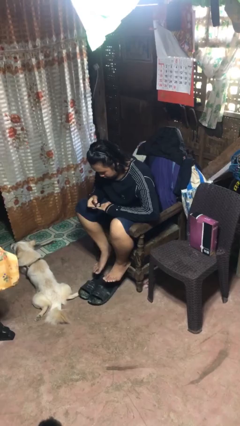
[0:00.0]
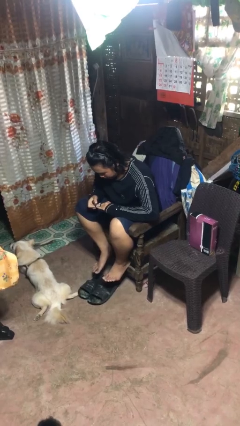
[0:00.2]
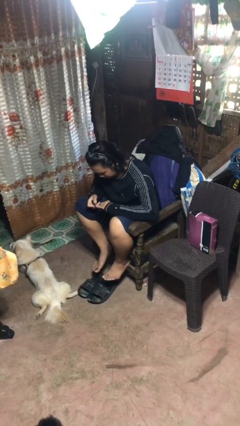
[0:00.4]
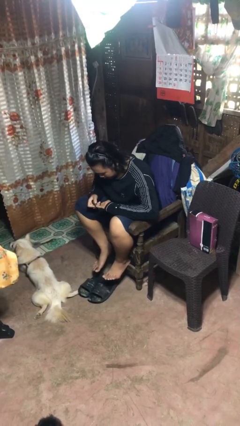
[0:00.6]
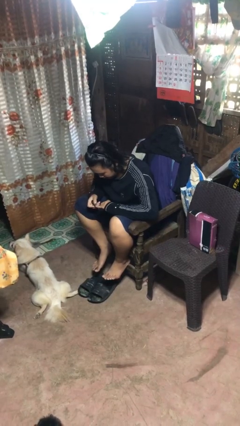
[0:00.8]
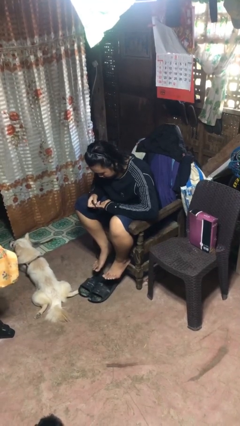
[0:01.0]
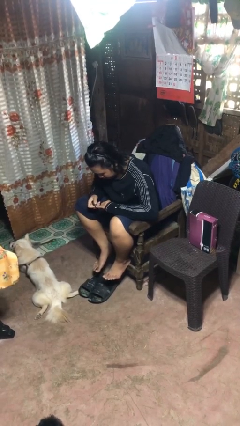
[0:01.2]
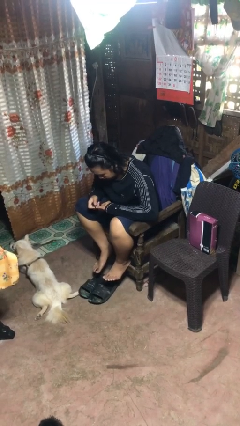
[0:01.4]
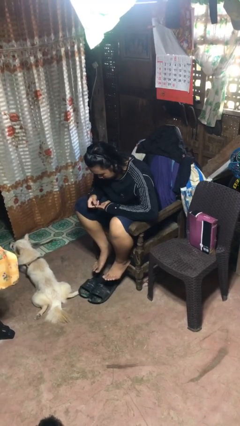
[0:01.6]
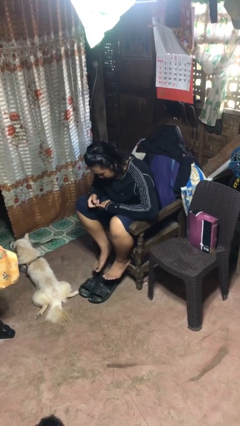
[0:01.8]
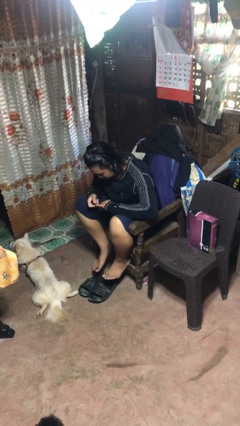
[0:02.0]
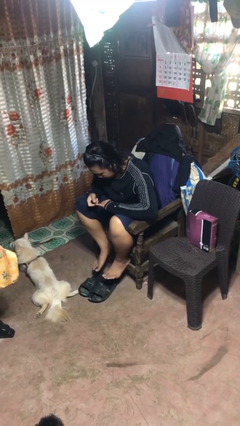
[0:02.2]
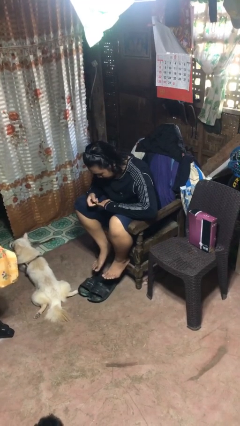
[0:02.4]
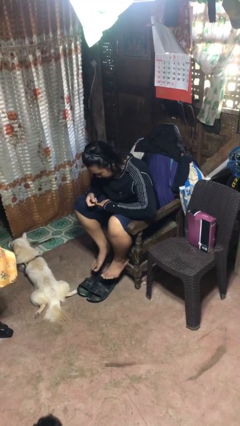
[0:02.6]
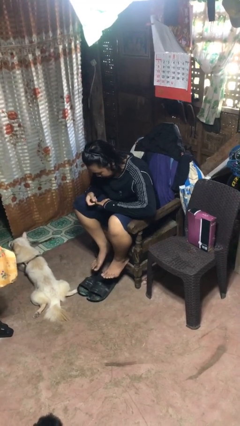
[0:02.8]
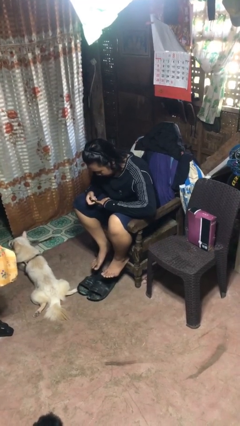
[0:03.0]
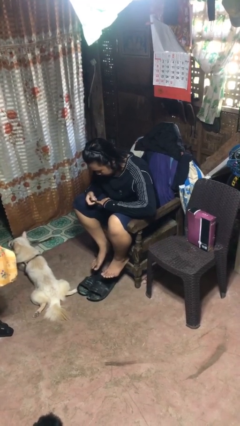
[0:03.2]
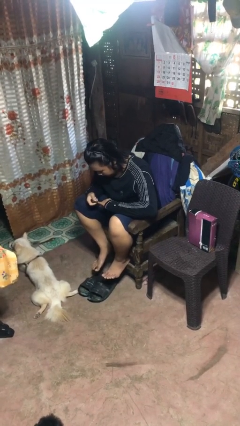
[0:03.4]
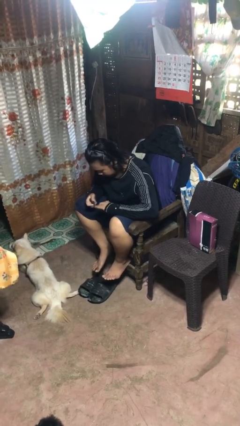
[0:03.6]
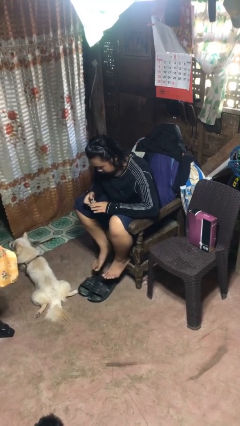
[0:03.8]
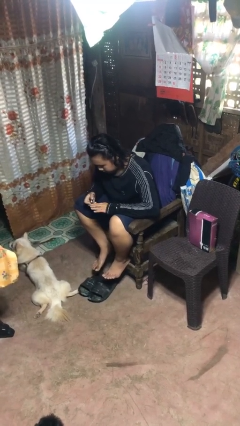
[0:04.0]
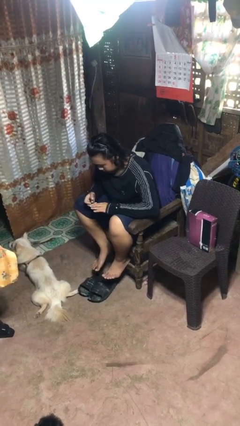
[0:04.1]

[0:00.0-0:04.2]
person clips fingernails

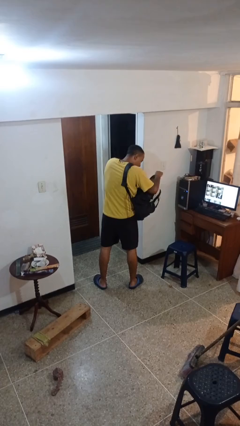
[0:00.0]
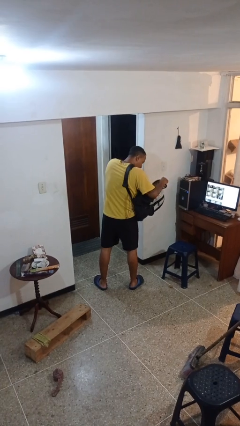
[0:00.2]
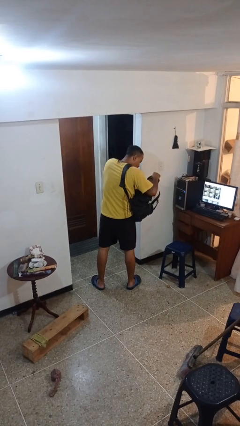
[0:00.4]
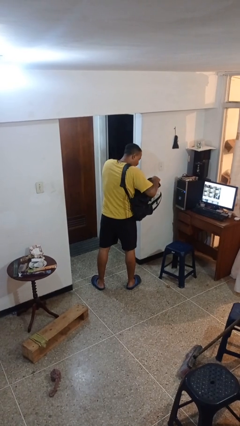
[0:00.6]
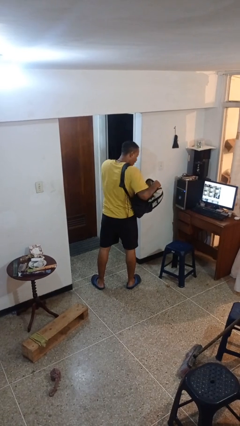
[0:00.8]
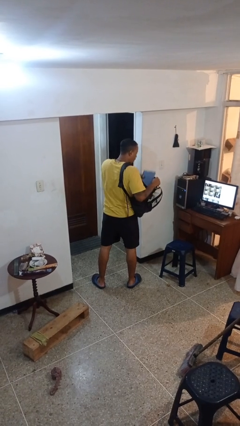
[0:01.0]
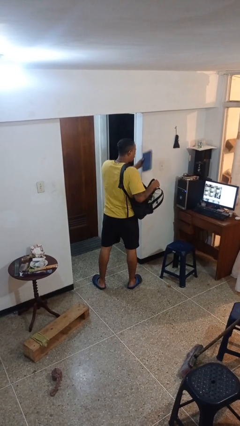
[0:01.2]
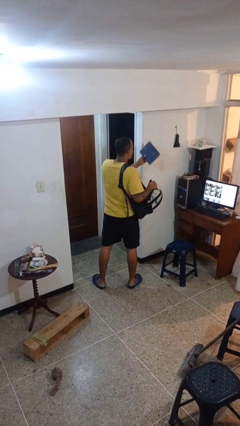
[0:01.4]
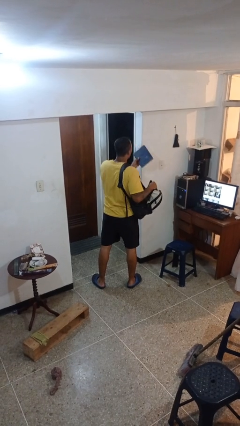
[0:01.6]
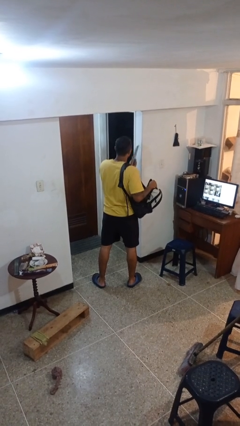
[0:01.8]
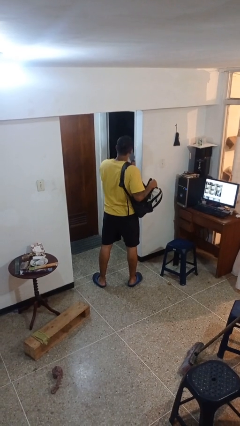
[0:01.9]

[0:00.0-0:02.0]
person takes object from backpack

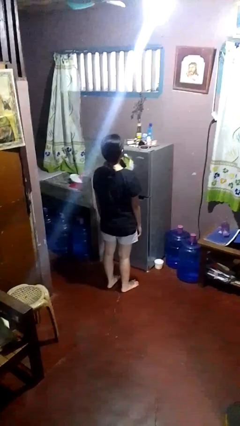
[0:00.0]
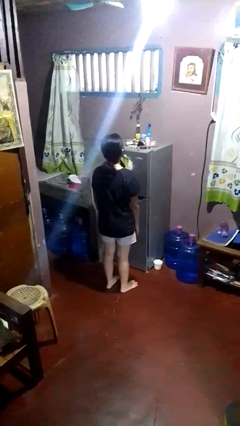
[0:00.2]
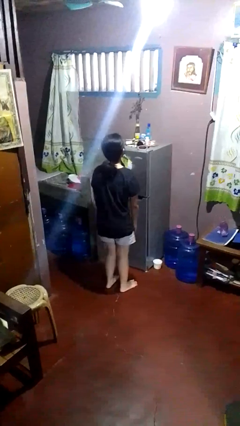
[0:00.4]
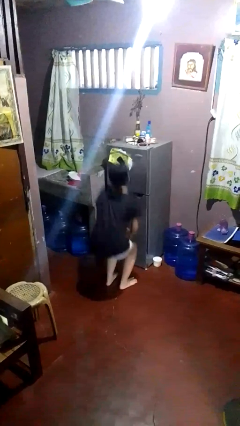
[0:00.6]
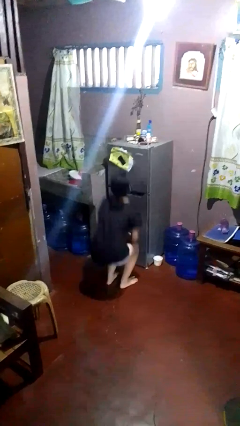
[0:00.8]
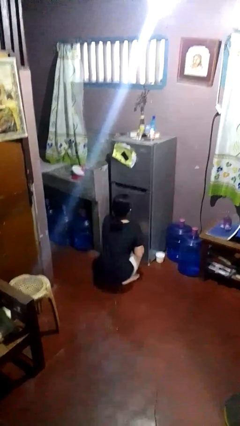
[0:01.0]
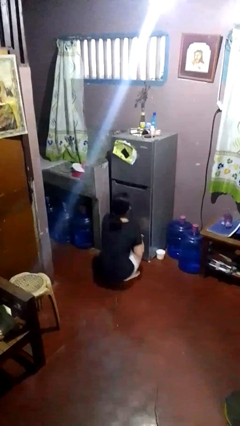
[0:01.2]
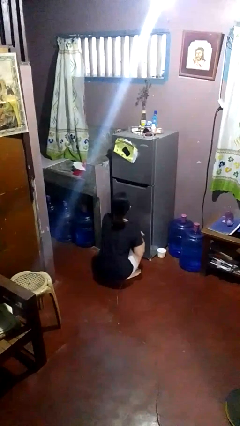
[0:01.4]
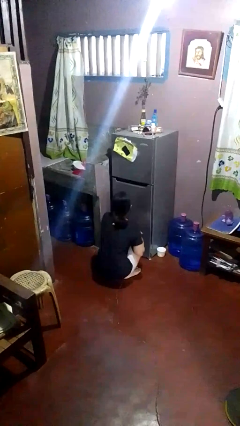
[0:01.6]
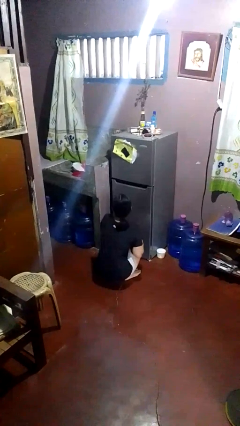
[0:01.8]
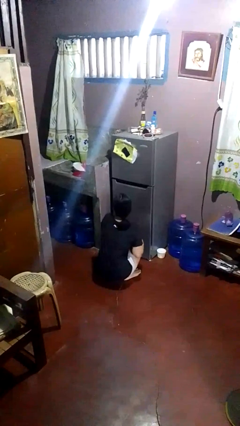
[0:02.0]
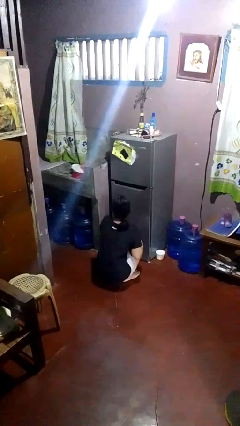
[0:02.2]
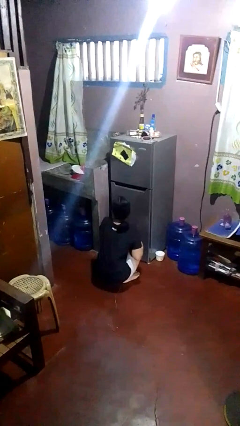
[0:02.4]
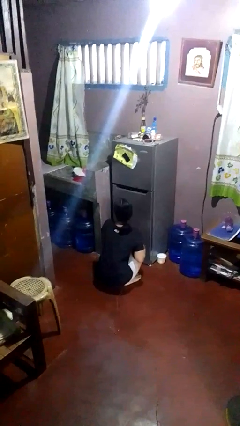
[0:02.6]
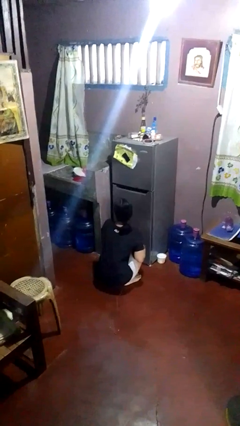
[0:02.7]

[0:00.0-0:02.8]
person squats

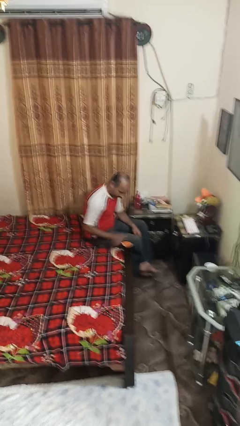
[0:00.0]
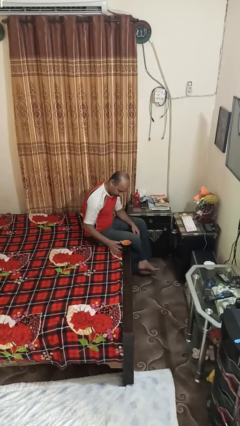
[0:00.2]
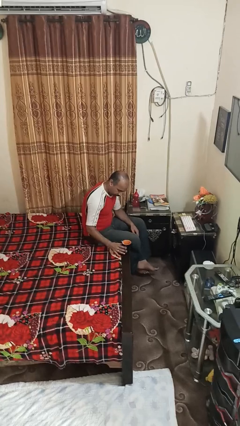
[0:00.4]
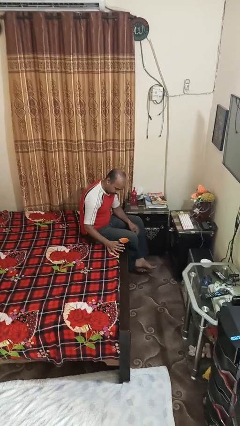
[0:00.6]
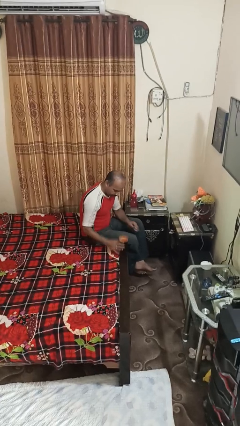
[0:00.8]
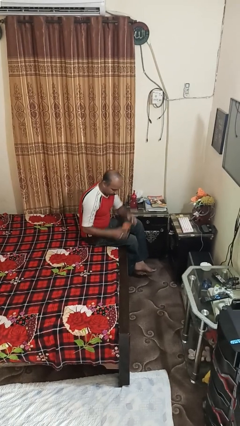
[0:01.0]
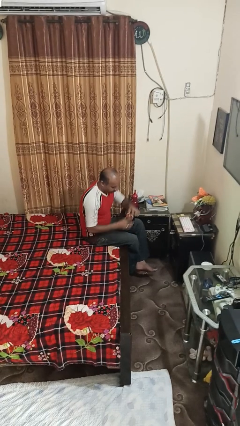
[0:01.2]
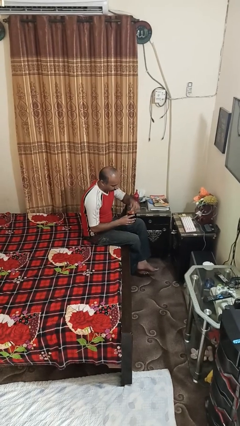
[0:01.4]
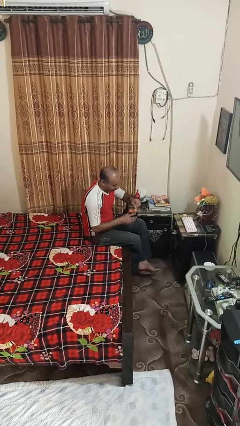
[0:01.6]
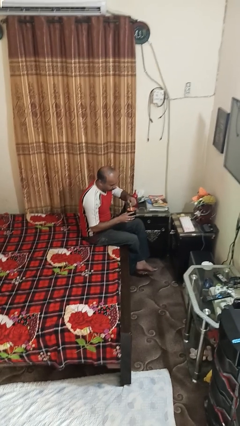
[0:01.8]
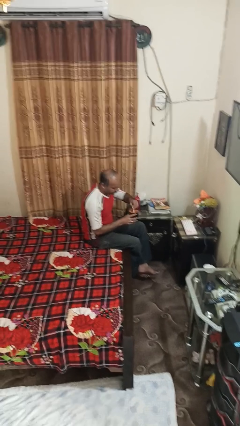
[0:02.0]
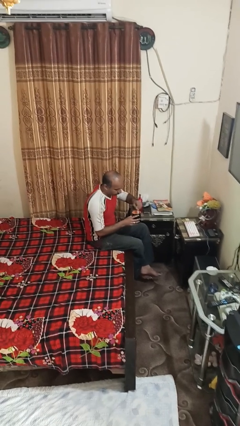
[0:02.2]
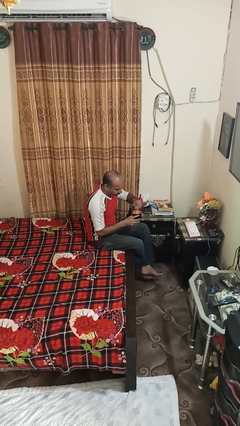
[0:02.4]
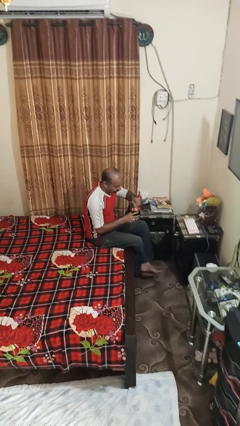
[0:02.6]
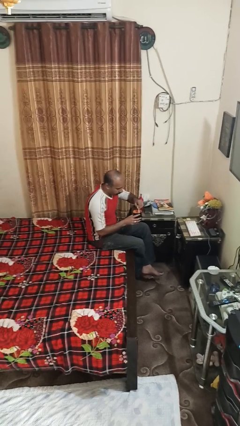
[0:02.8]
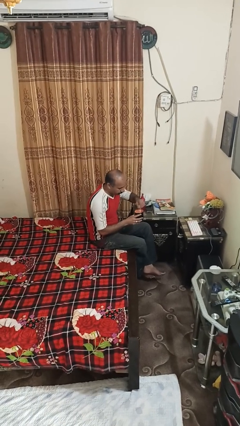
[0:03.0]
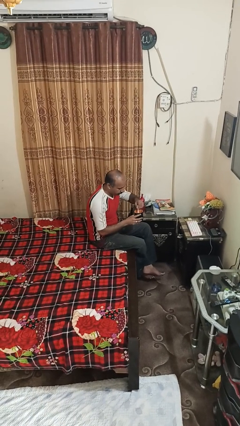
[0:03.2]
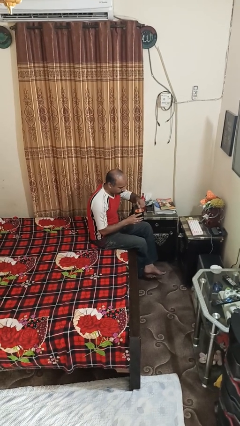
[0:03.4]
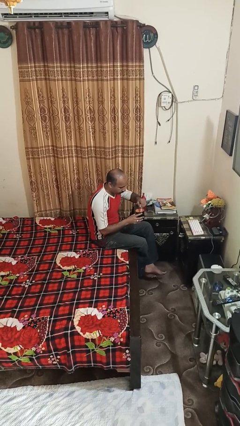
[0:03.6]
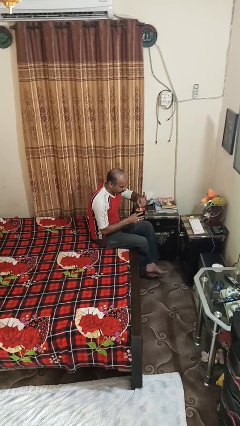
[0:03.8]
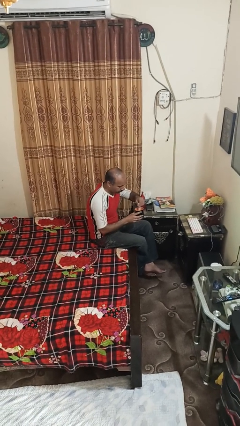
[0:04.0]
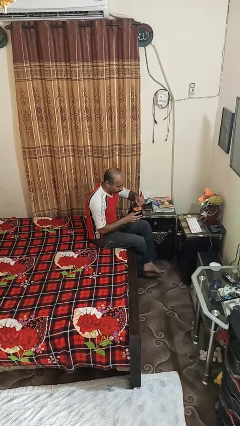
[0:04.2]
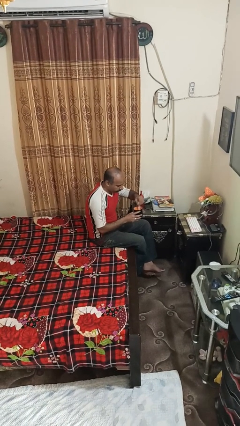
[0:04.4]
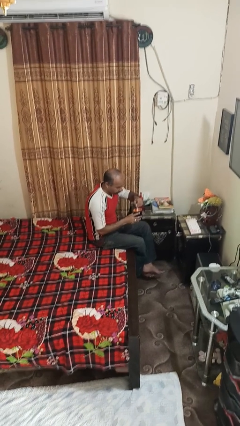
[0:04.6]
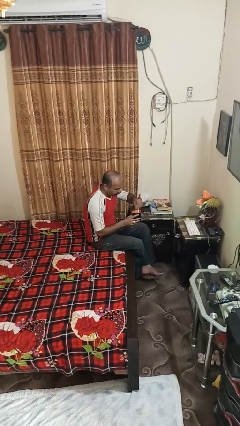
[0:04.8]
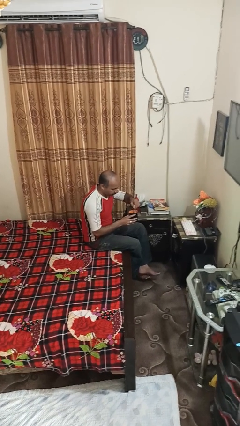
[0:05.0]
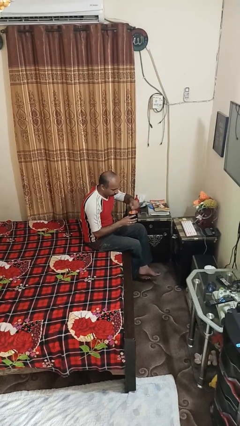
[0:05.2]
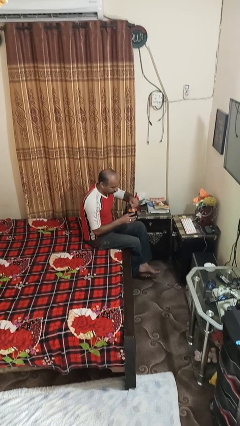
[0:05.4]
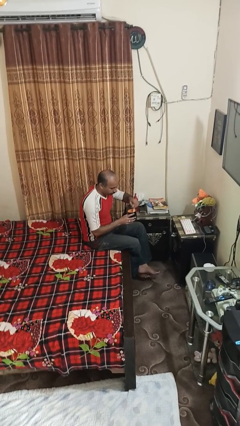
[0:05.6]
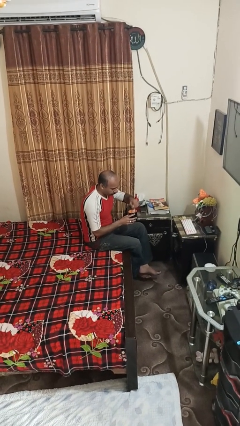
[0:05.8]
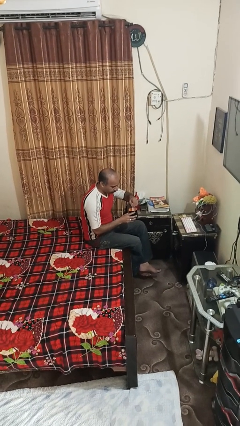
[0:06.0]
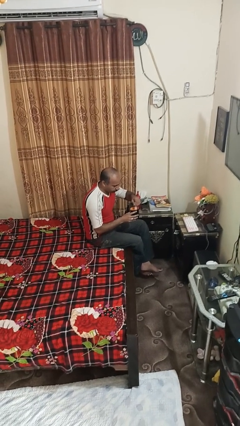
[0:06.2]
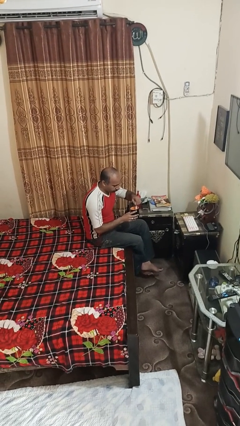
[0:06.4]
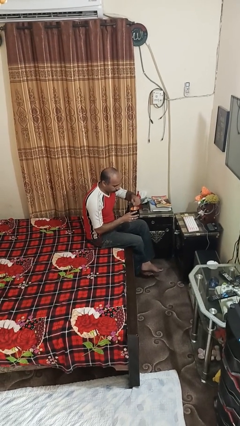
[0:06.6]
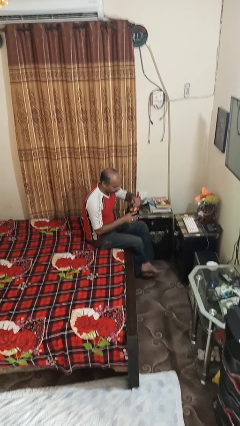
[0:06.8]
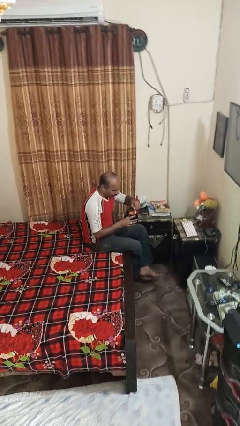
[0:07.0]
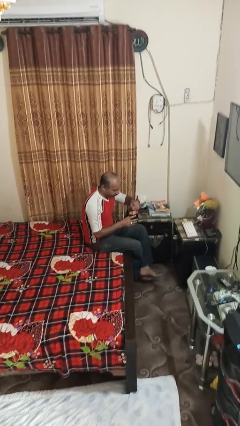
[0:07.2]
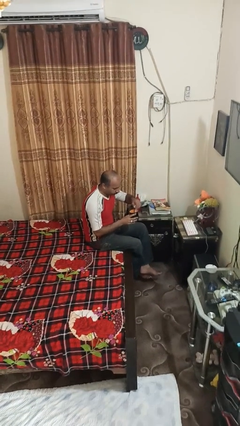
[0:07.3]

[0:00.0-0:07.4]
person stirs mug

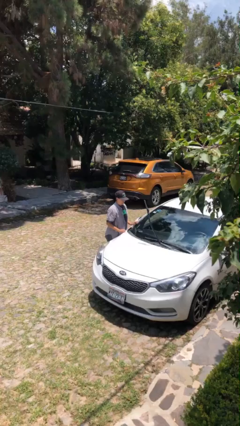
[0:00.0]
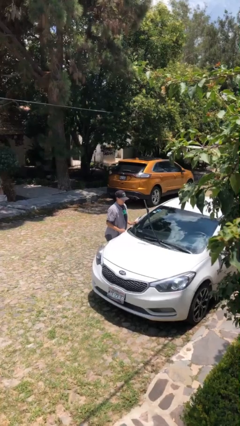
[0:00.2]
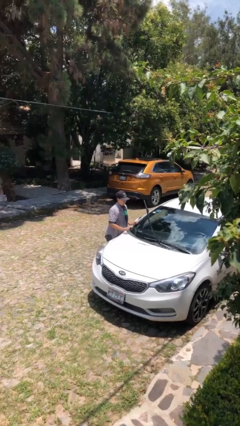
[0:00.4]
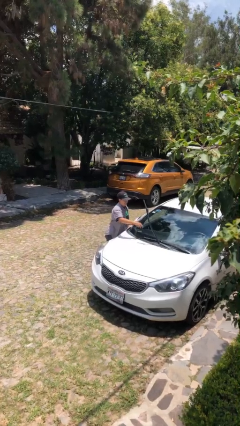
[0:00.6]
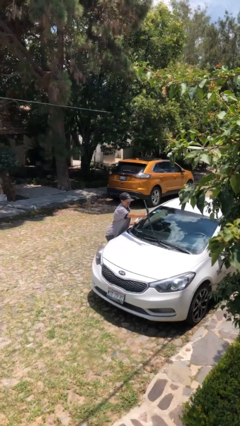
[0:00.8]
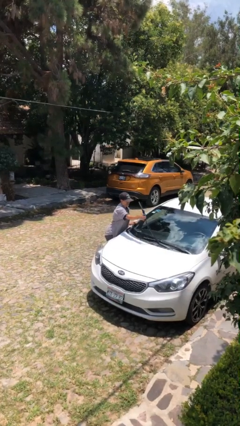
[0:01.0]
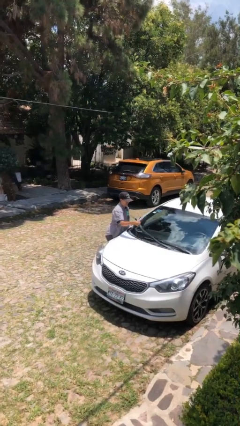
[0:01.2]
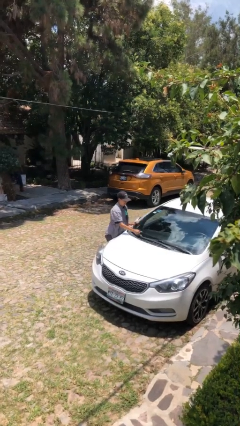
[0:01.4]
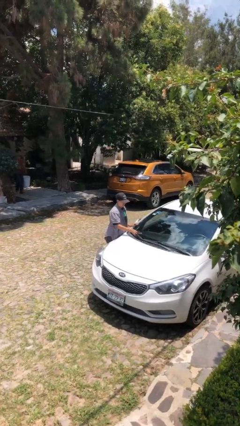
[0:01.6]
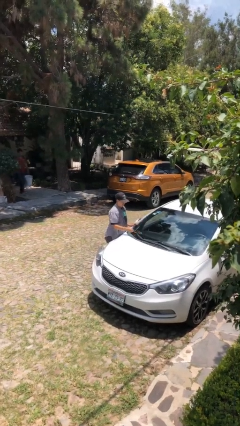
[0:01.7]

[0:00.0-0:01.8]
person flips down car wipers
